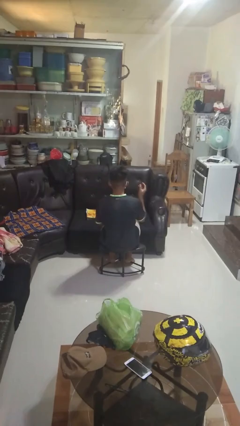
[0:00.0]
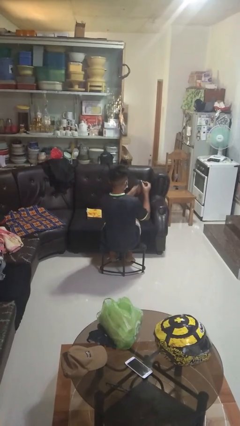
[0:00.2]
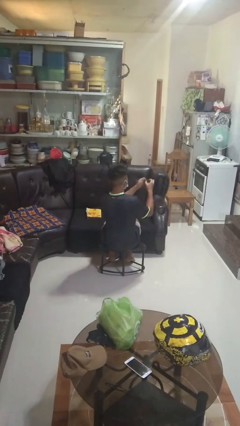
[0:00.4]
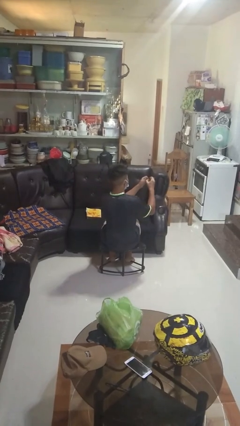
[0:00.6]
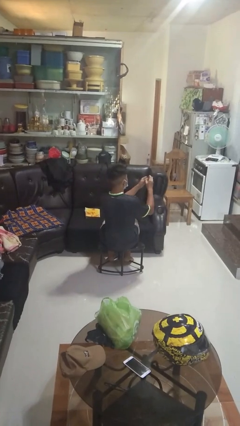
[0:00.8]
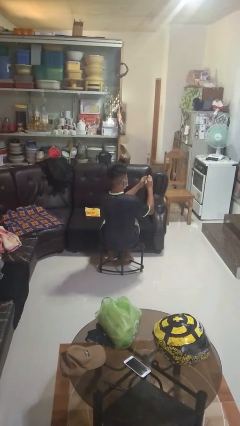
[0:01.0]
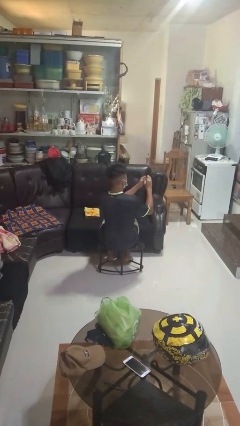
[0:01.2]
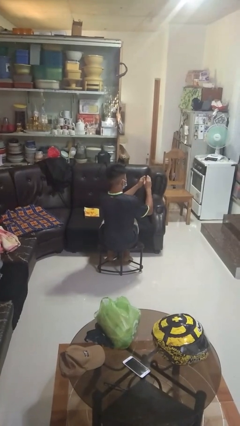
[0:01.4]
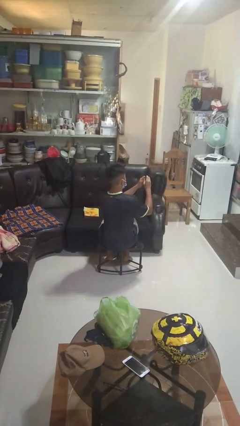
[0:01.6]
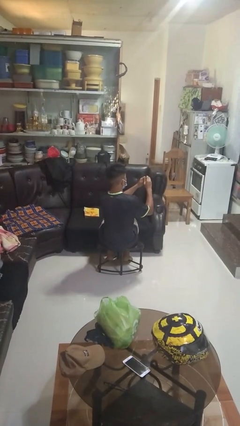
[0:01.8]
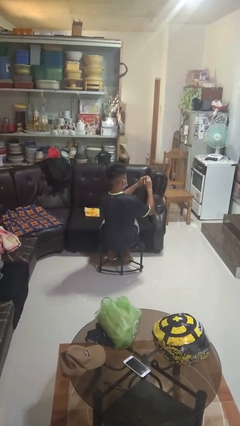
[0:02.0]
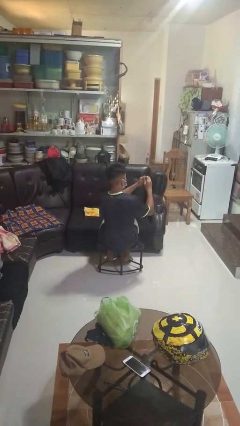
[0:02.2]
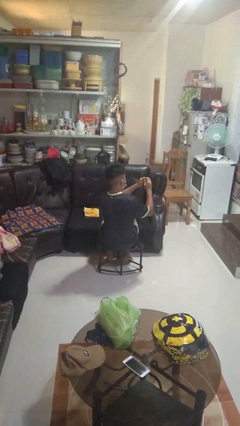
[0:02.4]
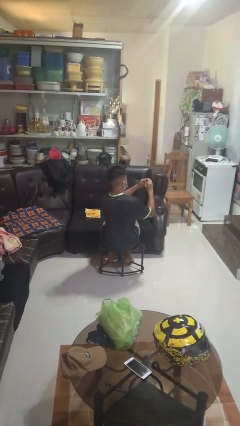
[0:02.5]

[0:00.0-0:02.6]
person clips fingernails

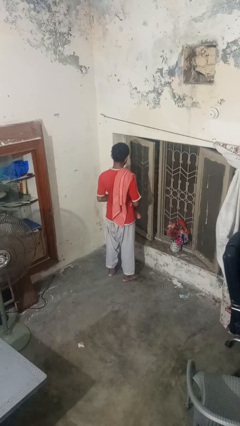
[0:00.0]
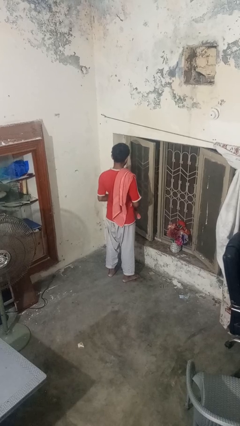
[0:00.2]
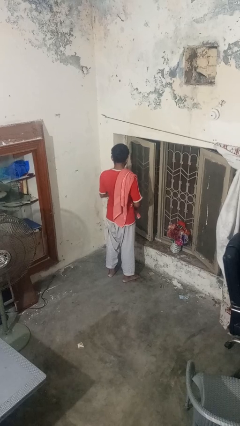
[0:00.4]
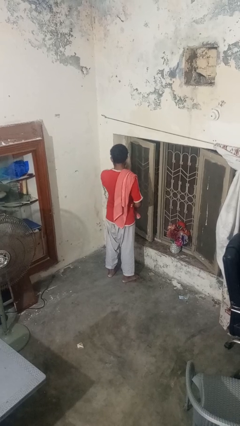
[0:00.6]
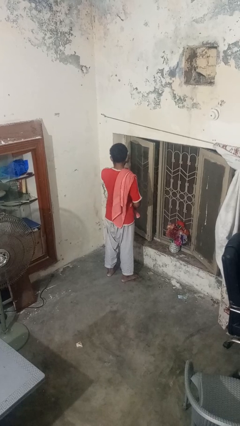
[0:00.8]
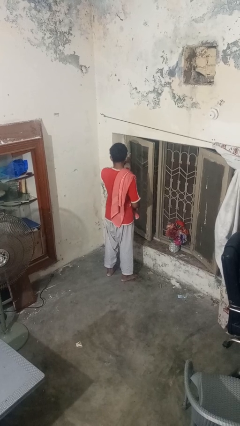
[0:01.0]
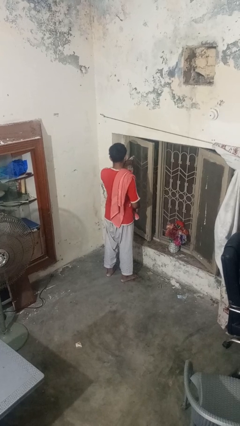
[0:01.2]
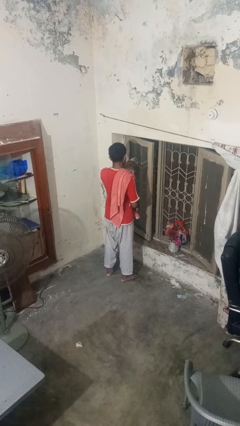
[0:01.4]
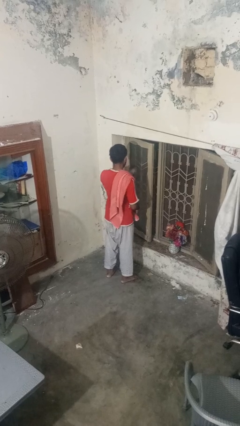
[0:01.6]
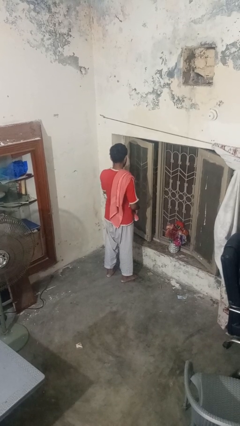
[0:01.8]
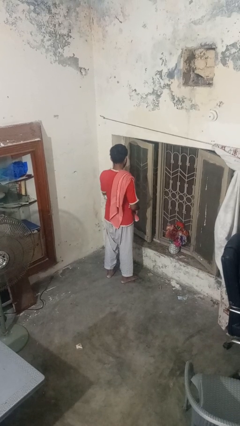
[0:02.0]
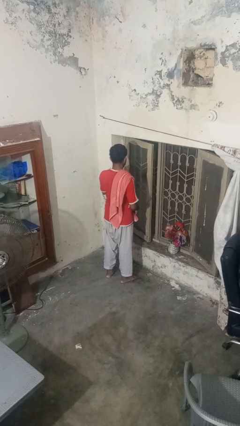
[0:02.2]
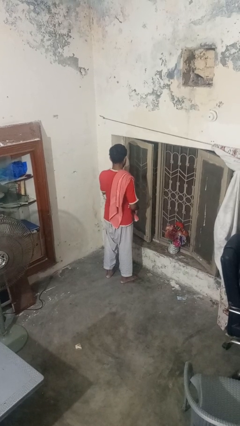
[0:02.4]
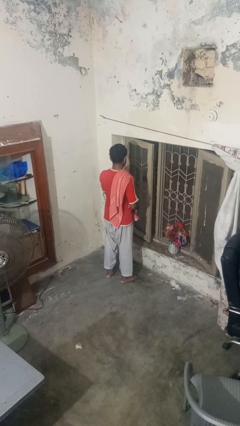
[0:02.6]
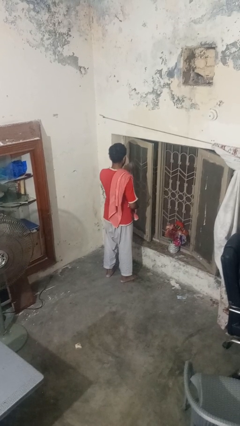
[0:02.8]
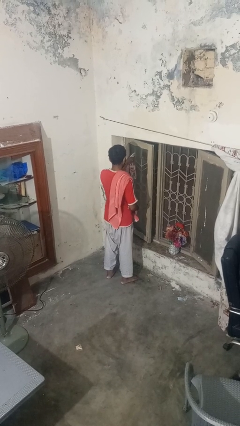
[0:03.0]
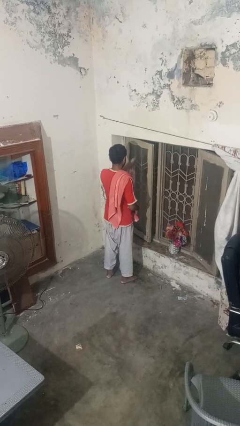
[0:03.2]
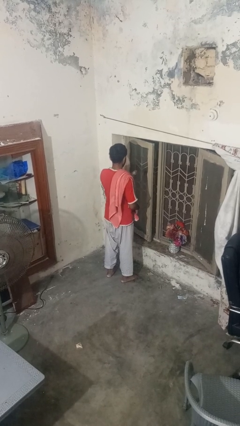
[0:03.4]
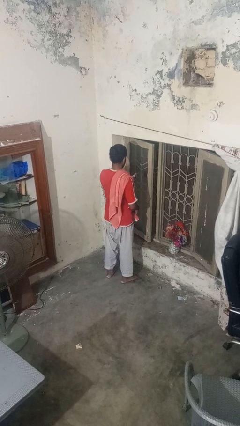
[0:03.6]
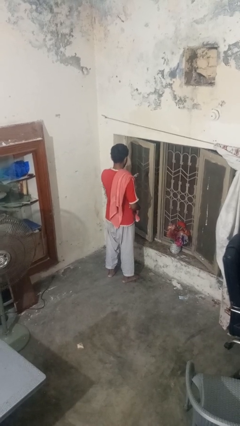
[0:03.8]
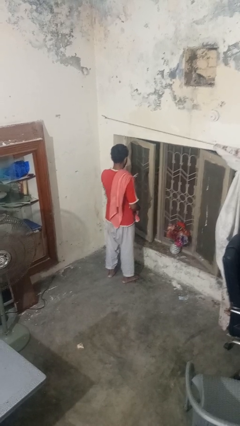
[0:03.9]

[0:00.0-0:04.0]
person sprays from bottle

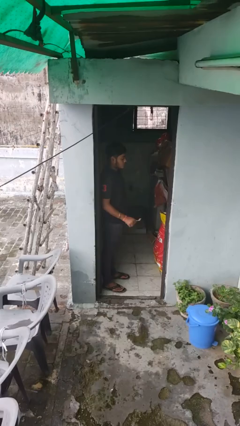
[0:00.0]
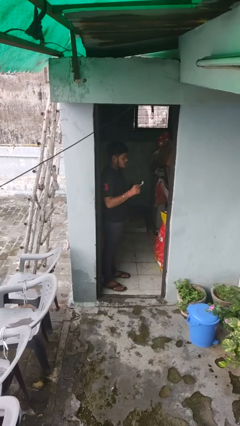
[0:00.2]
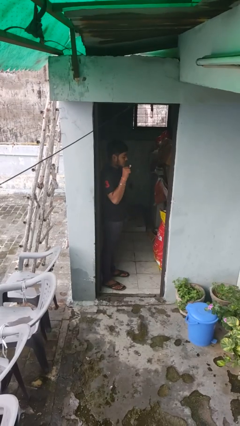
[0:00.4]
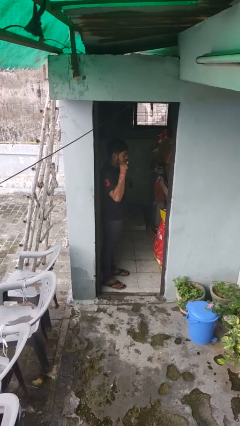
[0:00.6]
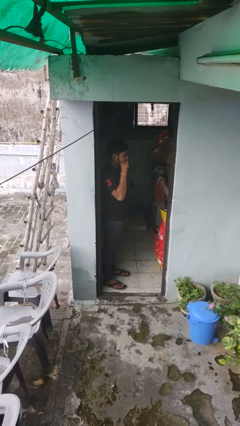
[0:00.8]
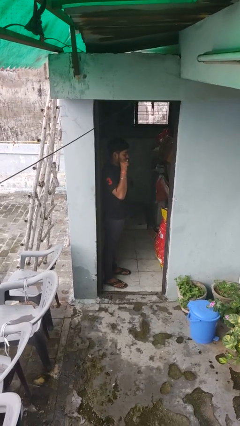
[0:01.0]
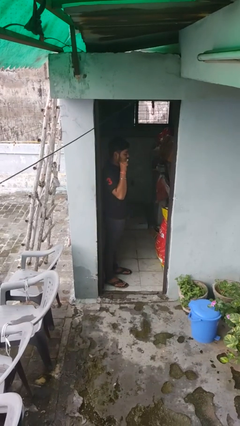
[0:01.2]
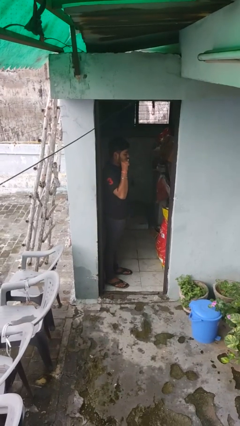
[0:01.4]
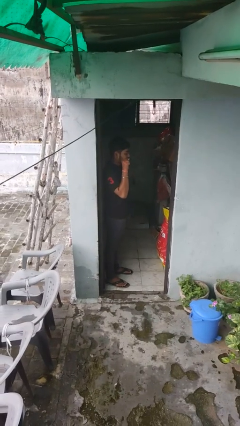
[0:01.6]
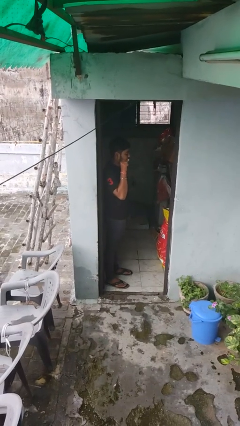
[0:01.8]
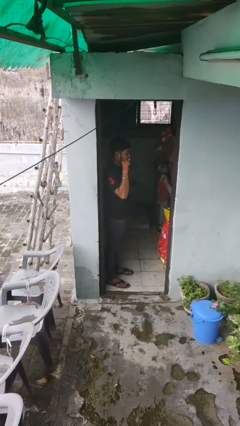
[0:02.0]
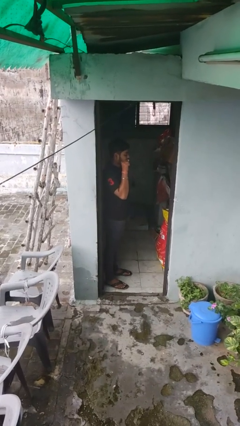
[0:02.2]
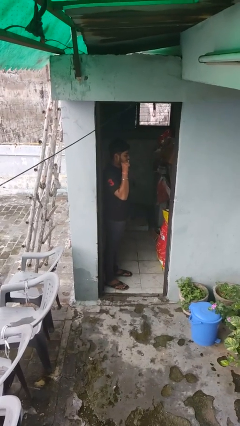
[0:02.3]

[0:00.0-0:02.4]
person brushes teeth

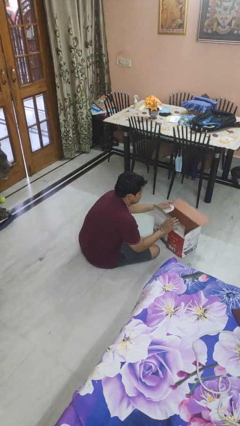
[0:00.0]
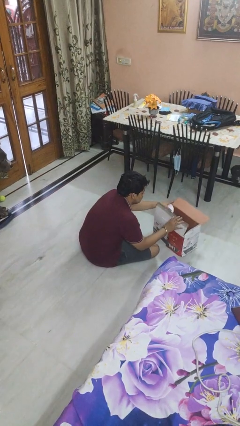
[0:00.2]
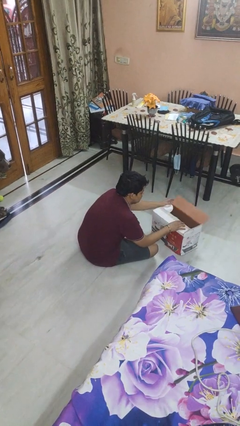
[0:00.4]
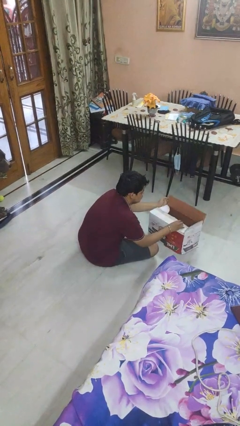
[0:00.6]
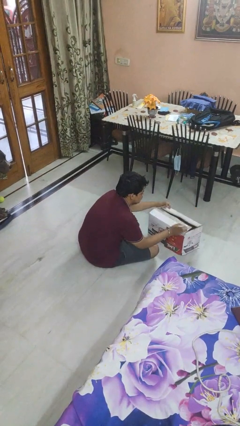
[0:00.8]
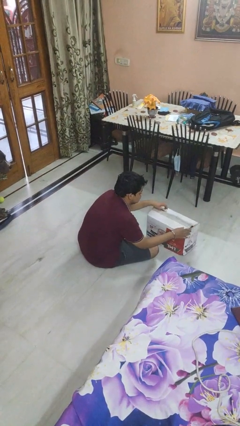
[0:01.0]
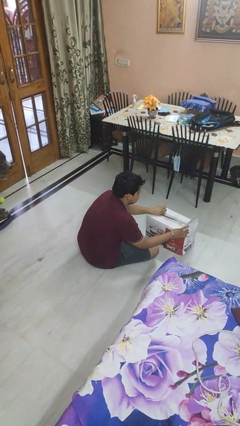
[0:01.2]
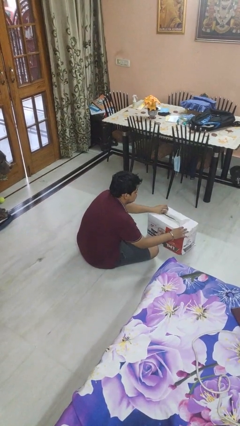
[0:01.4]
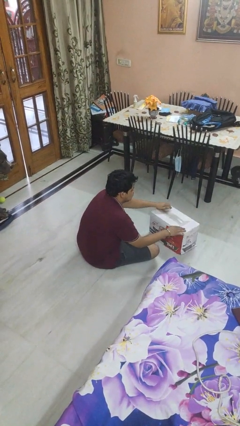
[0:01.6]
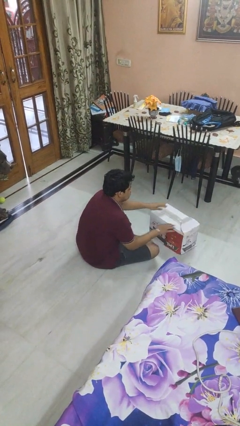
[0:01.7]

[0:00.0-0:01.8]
person closes box

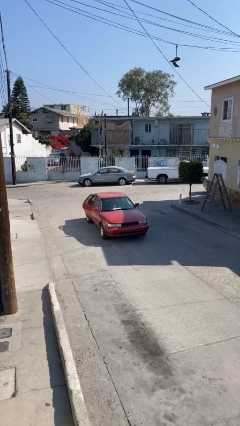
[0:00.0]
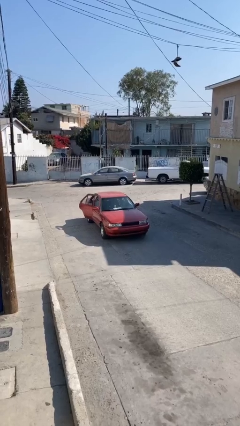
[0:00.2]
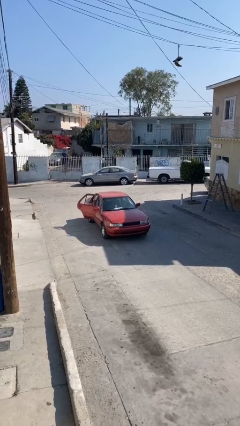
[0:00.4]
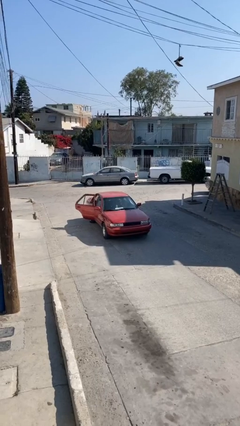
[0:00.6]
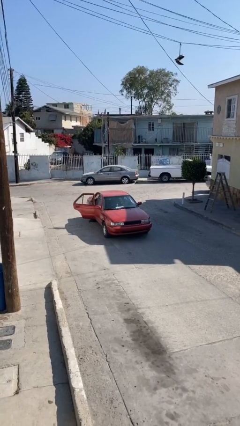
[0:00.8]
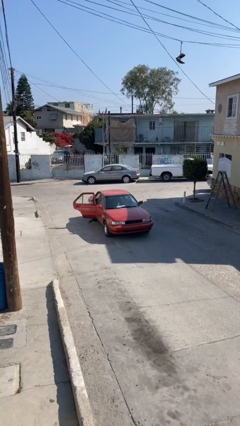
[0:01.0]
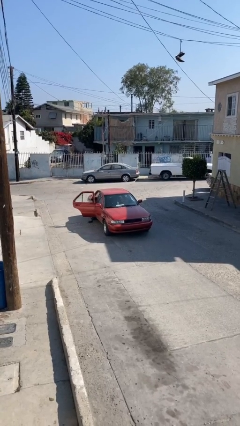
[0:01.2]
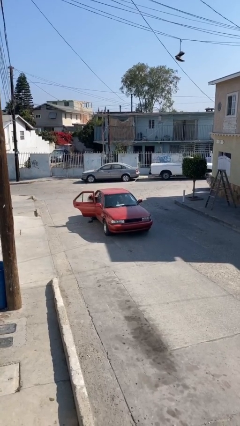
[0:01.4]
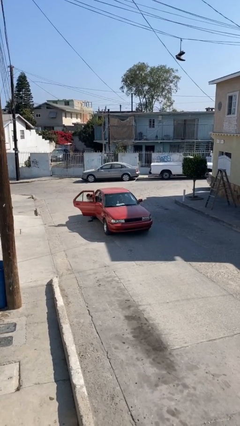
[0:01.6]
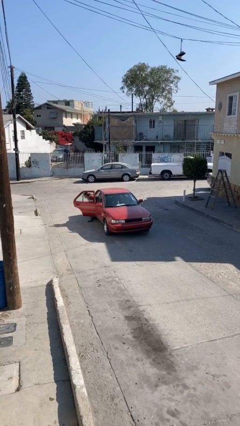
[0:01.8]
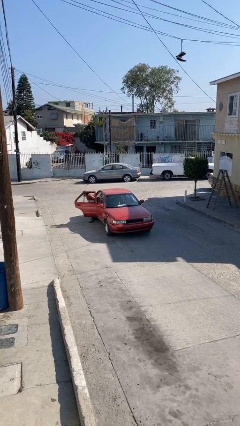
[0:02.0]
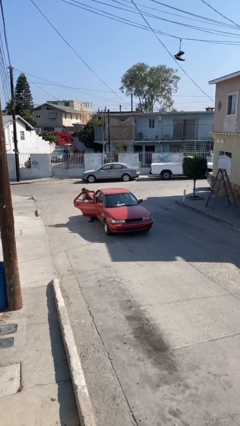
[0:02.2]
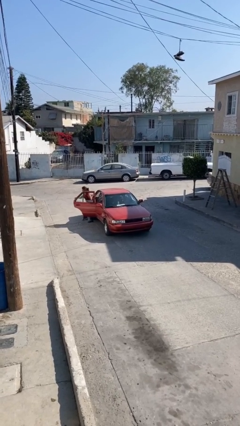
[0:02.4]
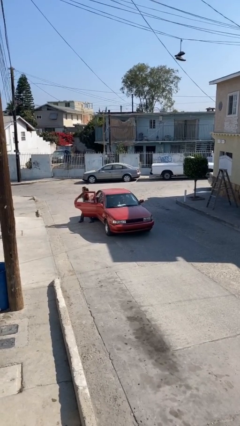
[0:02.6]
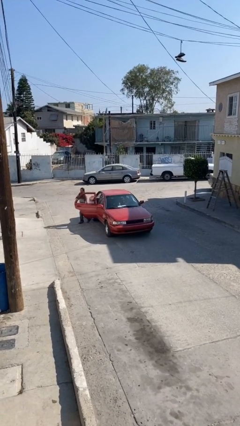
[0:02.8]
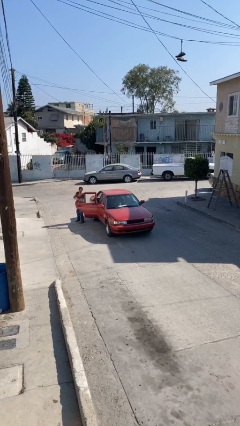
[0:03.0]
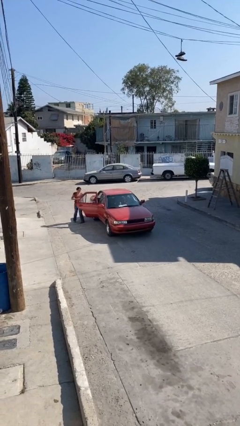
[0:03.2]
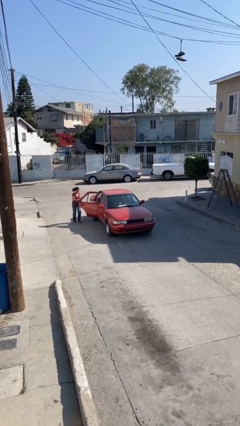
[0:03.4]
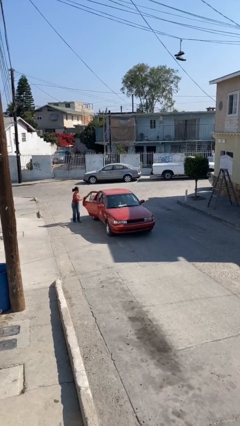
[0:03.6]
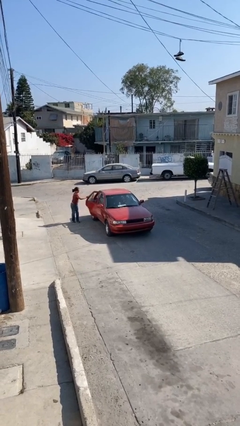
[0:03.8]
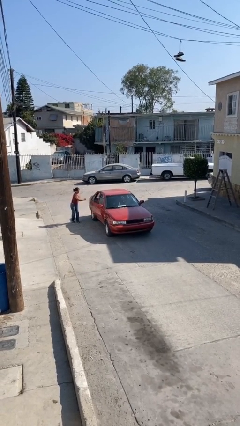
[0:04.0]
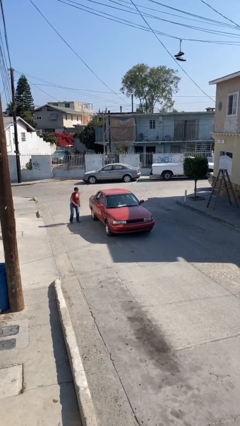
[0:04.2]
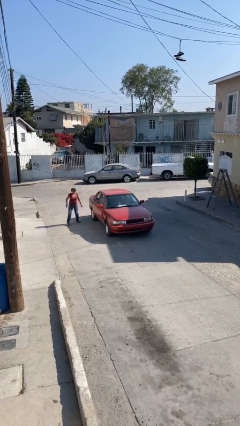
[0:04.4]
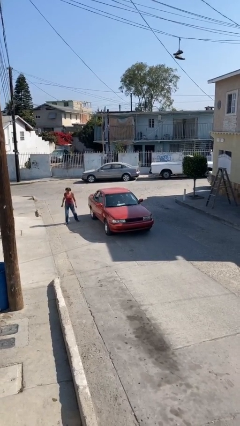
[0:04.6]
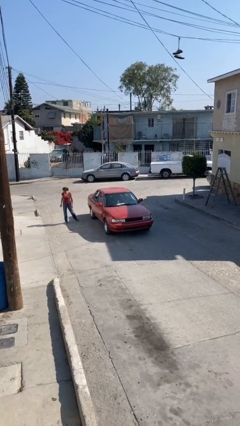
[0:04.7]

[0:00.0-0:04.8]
car drops off person

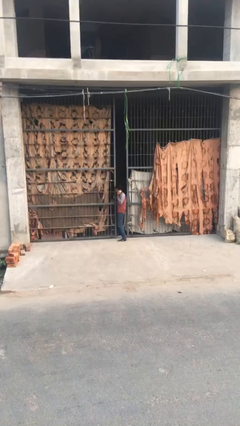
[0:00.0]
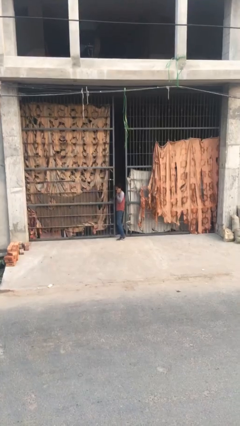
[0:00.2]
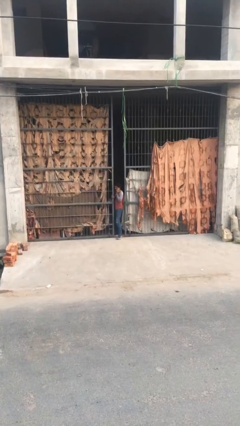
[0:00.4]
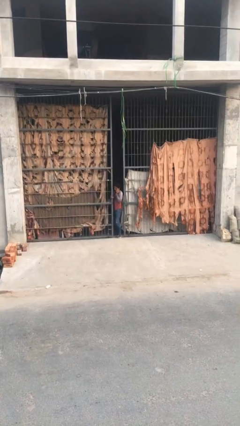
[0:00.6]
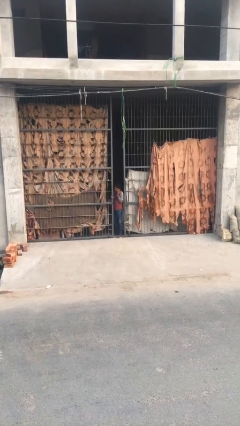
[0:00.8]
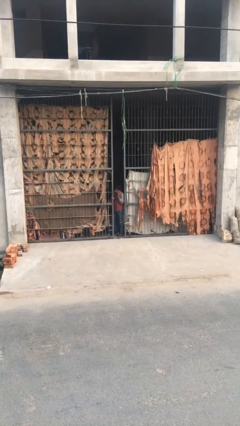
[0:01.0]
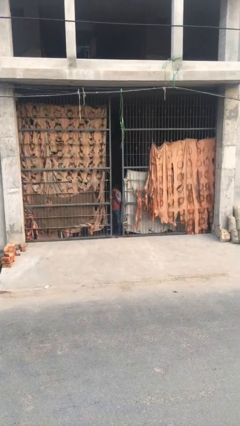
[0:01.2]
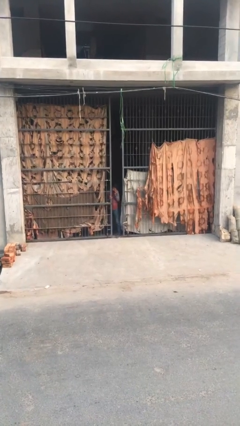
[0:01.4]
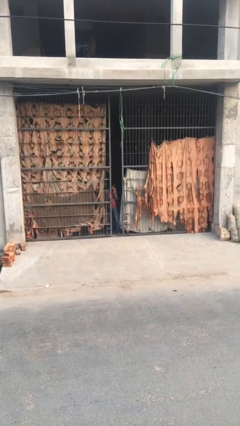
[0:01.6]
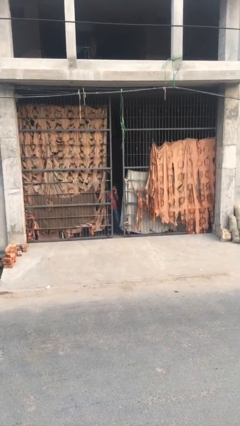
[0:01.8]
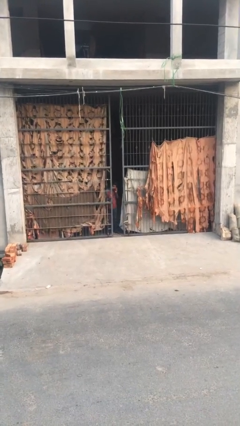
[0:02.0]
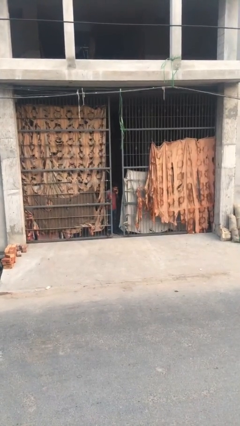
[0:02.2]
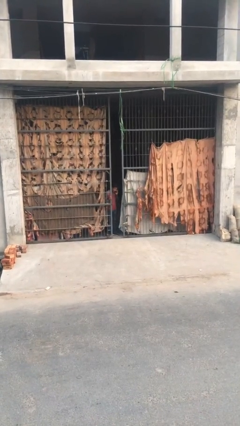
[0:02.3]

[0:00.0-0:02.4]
person exits scene through structure
